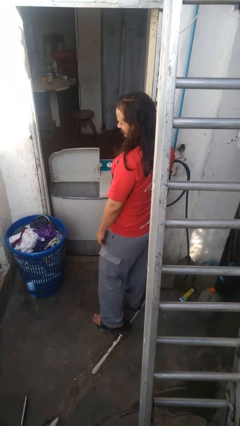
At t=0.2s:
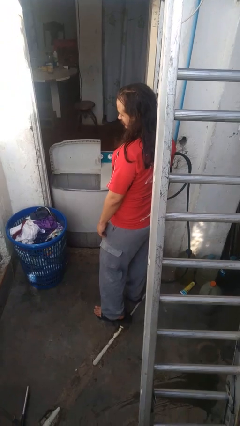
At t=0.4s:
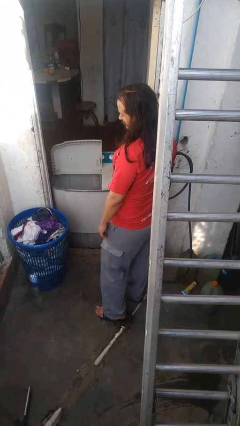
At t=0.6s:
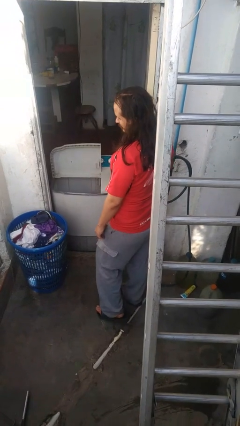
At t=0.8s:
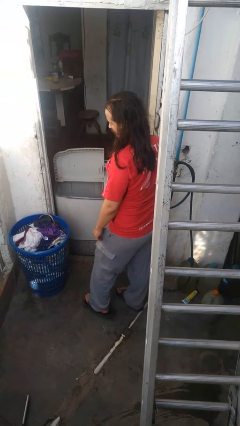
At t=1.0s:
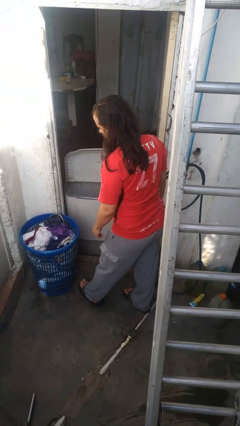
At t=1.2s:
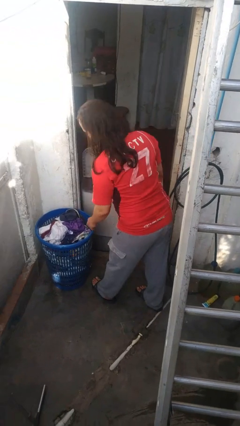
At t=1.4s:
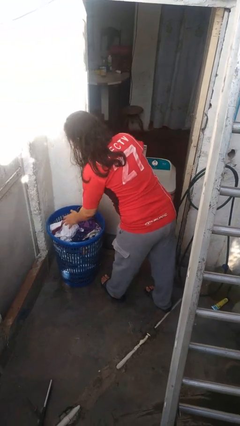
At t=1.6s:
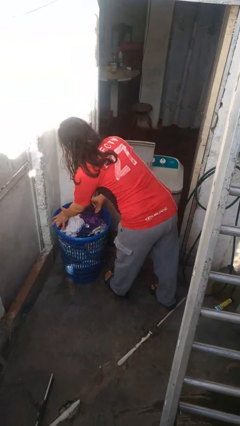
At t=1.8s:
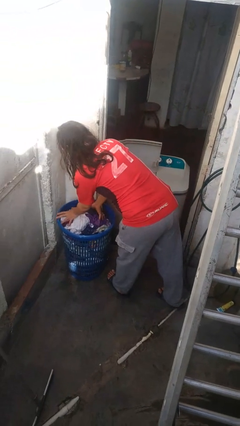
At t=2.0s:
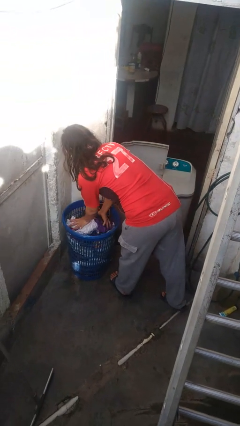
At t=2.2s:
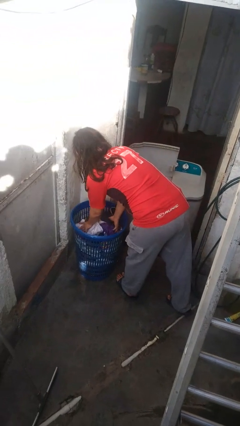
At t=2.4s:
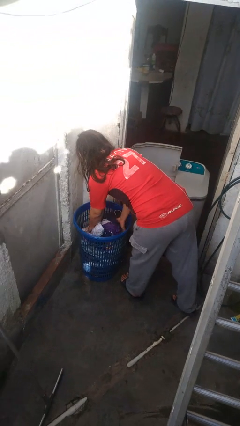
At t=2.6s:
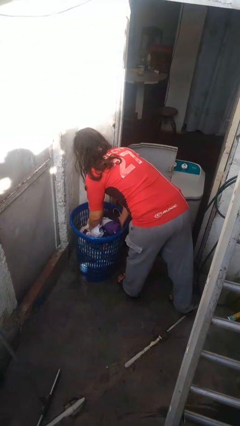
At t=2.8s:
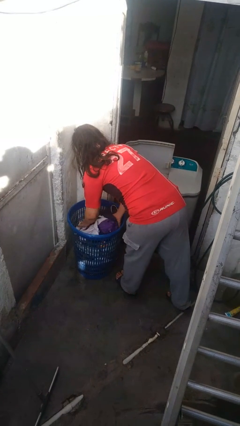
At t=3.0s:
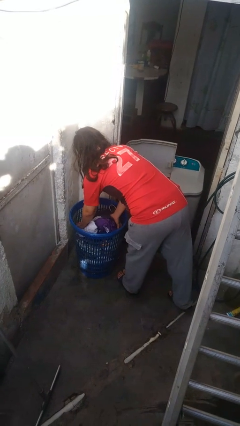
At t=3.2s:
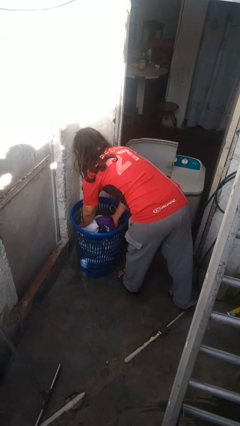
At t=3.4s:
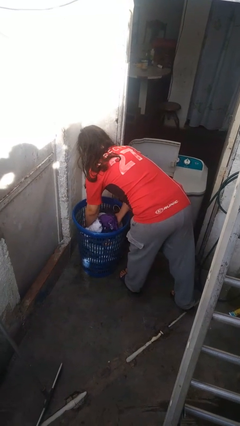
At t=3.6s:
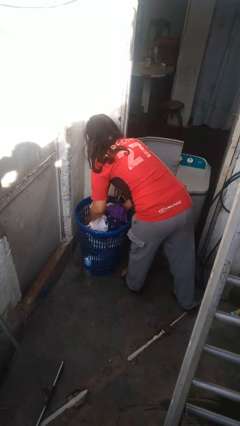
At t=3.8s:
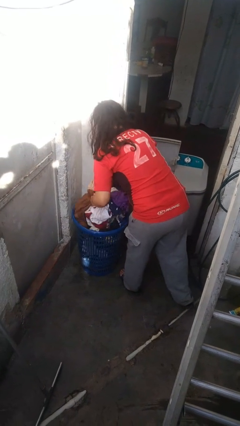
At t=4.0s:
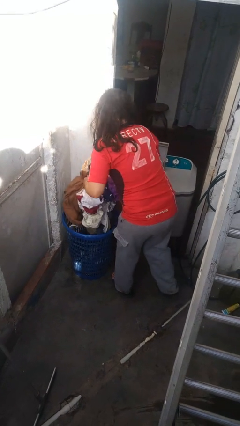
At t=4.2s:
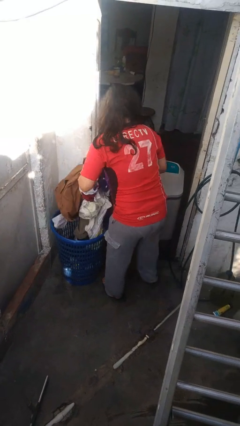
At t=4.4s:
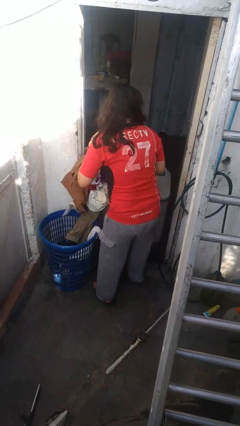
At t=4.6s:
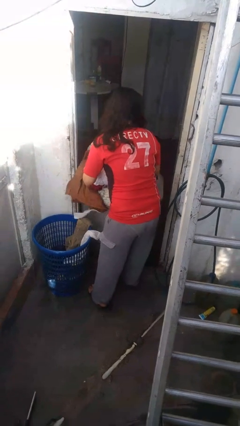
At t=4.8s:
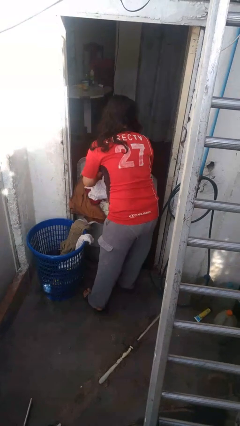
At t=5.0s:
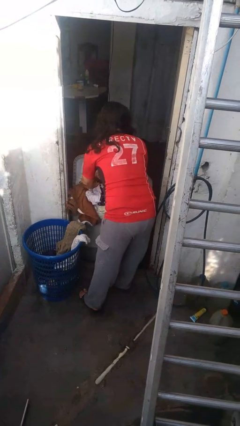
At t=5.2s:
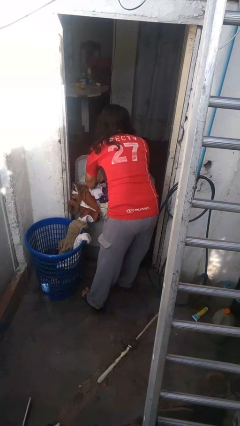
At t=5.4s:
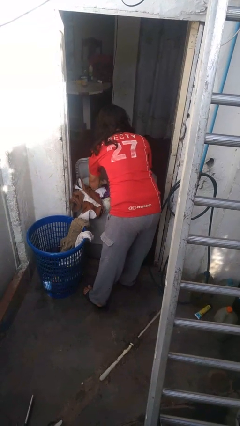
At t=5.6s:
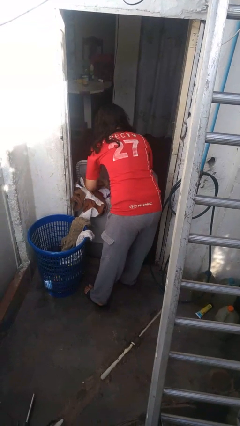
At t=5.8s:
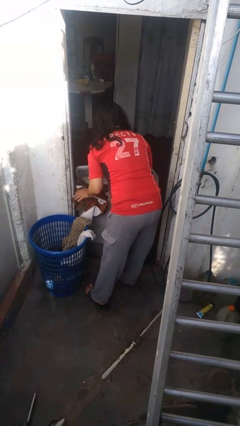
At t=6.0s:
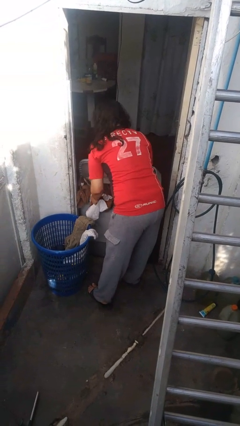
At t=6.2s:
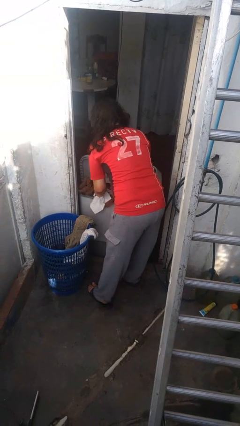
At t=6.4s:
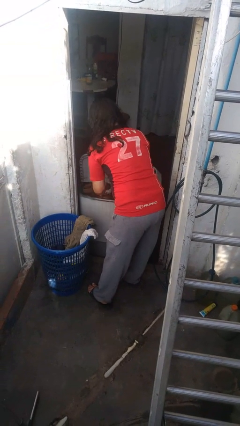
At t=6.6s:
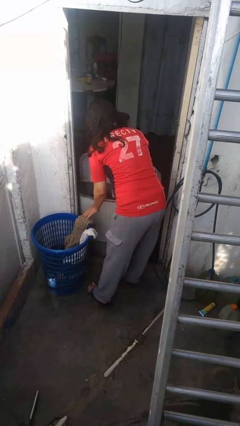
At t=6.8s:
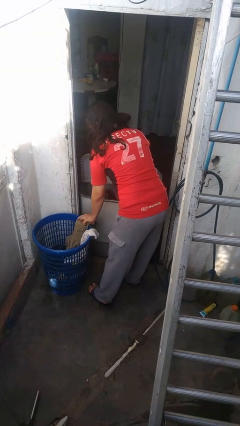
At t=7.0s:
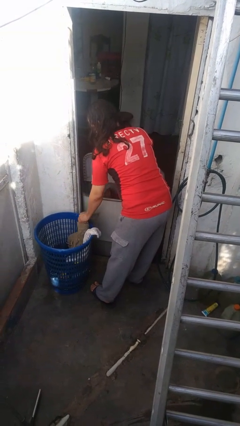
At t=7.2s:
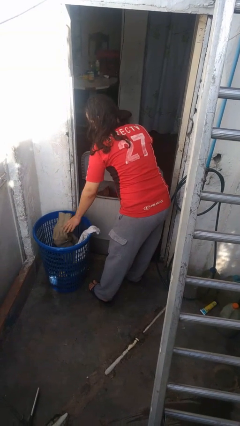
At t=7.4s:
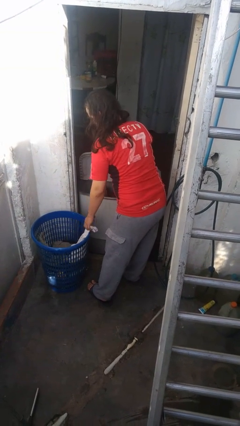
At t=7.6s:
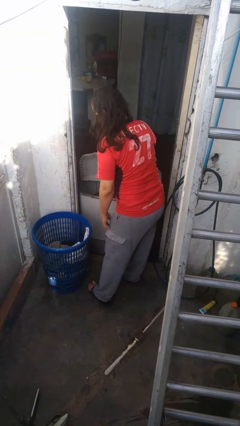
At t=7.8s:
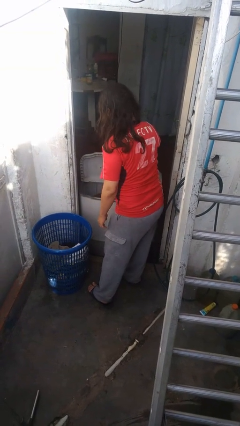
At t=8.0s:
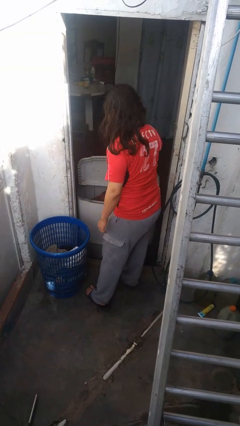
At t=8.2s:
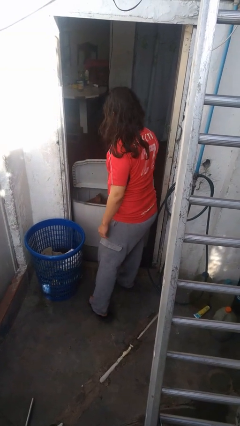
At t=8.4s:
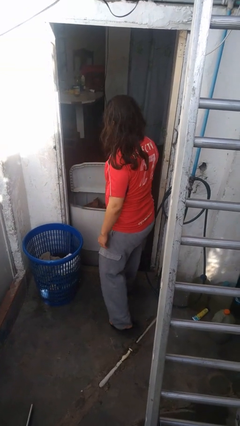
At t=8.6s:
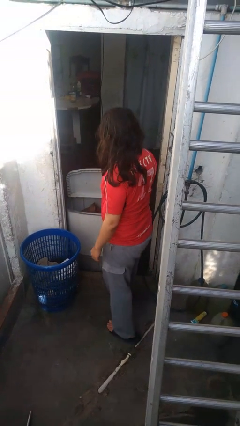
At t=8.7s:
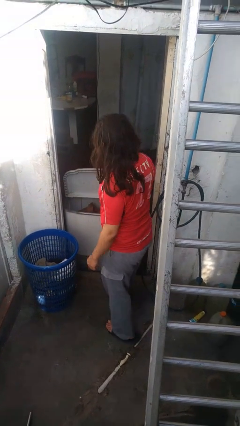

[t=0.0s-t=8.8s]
person loads clotheswasher

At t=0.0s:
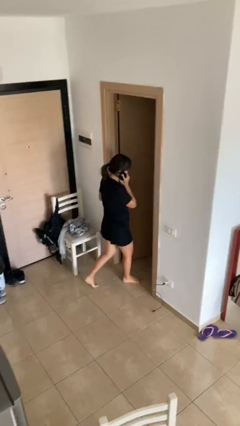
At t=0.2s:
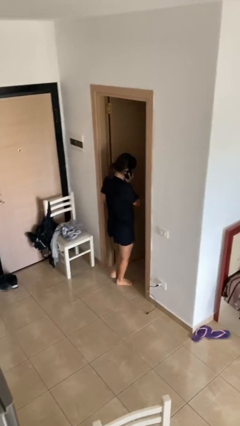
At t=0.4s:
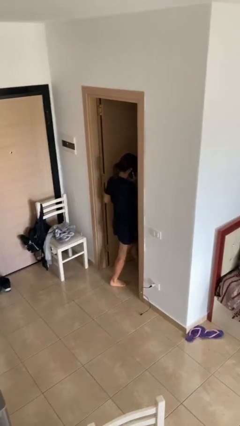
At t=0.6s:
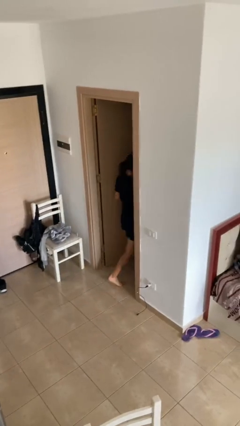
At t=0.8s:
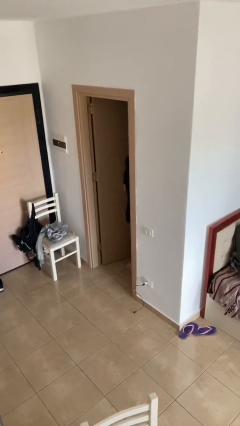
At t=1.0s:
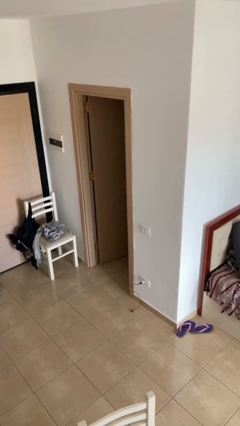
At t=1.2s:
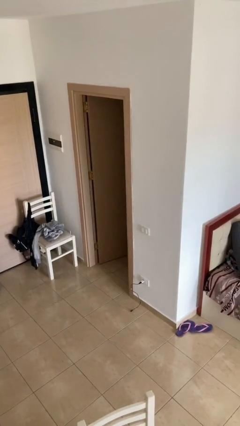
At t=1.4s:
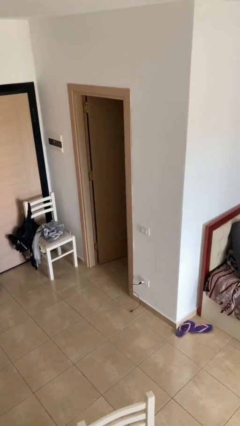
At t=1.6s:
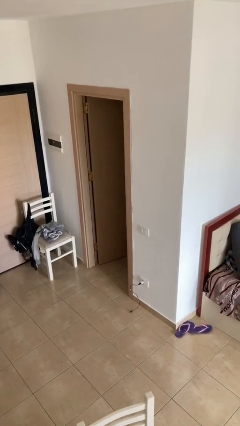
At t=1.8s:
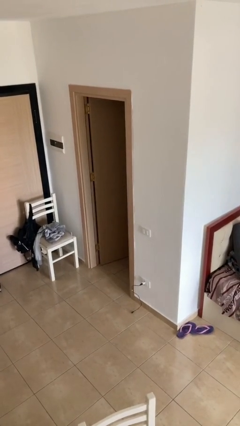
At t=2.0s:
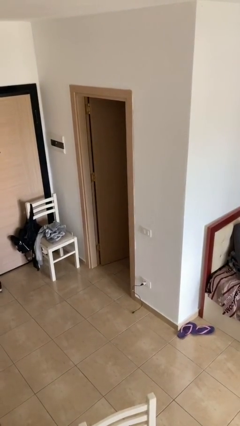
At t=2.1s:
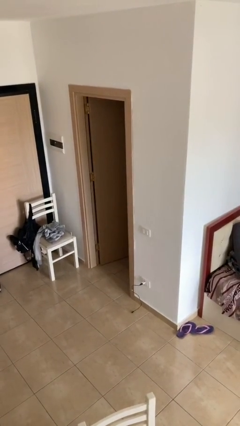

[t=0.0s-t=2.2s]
person exits scene through structure

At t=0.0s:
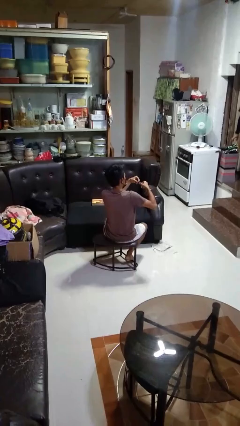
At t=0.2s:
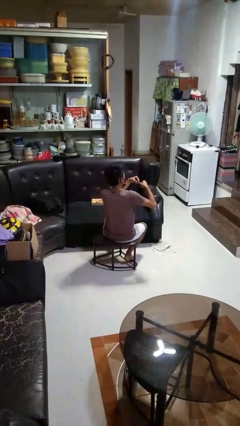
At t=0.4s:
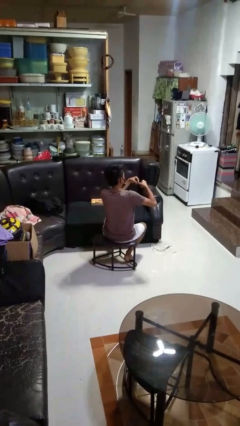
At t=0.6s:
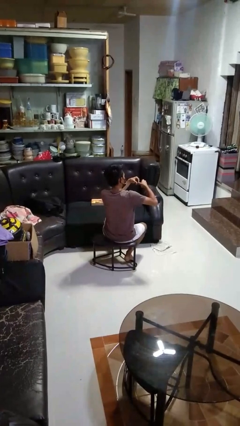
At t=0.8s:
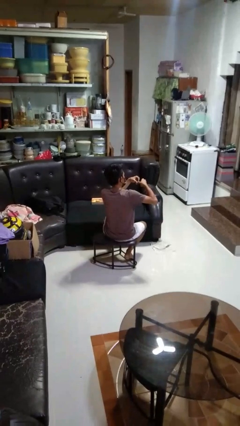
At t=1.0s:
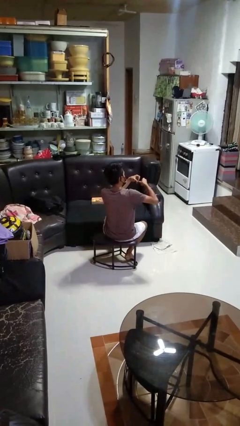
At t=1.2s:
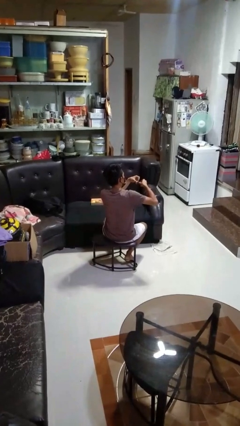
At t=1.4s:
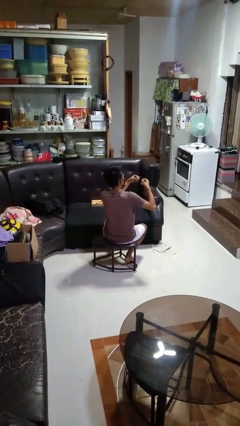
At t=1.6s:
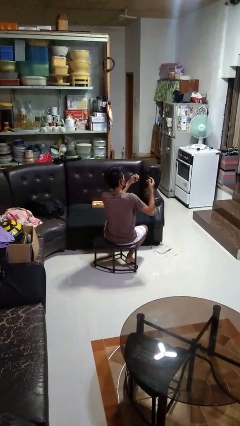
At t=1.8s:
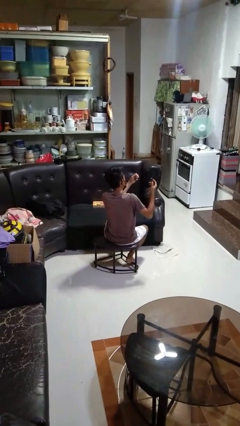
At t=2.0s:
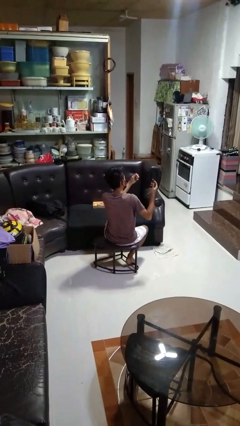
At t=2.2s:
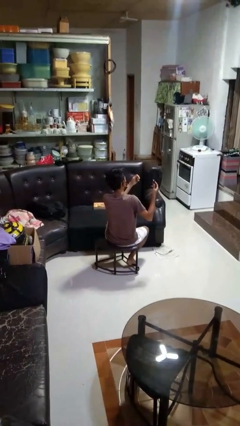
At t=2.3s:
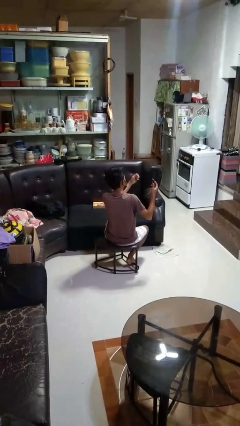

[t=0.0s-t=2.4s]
person clips fingernails

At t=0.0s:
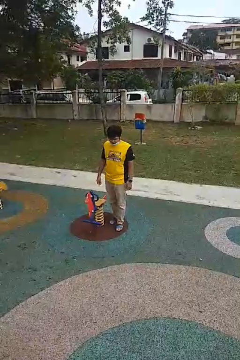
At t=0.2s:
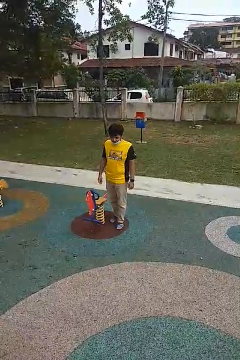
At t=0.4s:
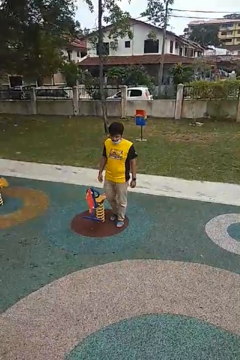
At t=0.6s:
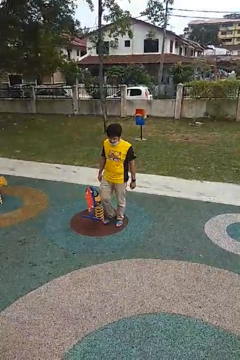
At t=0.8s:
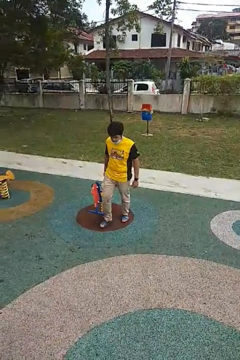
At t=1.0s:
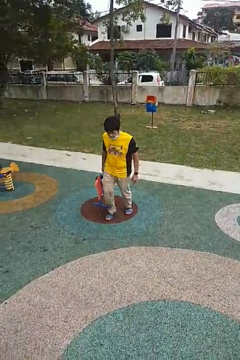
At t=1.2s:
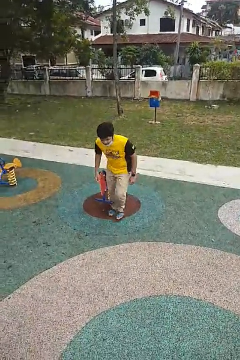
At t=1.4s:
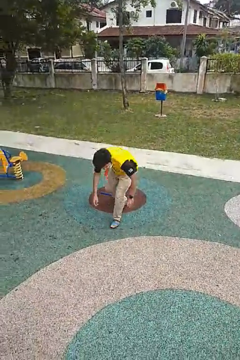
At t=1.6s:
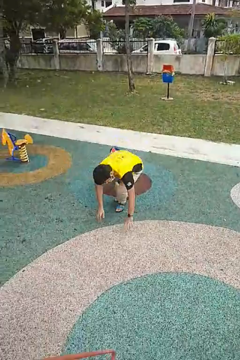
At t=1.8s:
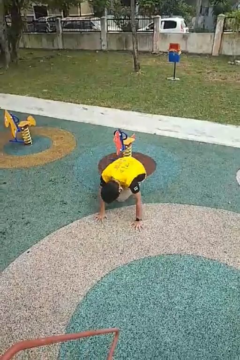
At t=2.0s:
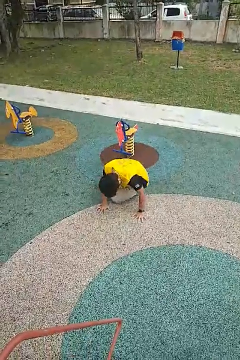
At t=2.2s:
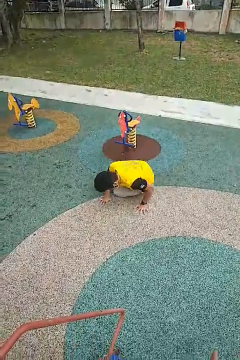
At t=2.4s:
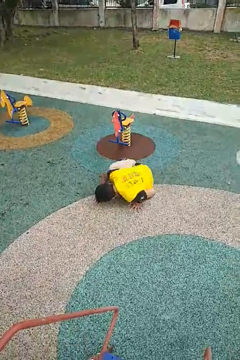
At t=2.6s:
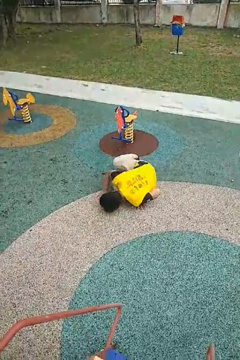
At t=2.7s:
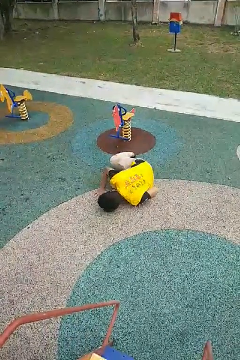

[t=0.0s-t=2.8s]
person trips on object on floor

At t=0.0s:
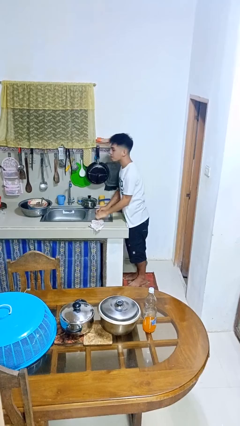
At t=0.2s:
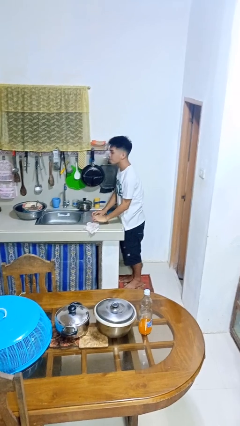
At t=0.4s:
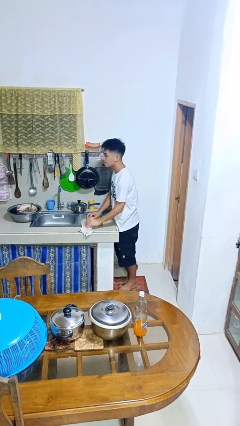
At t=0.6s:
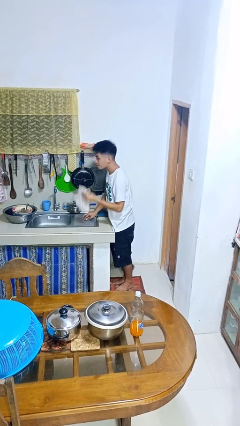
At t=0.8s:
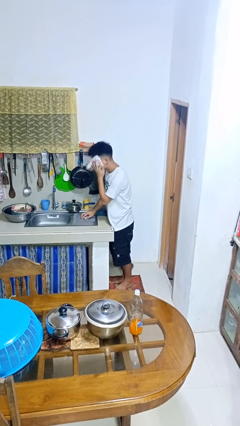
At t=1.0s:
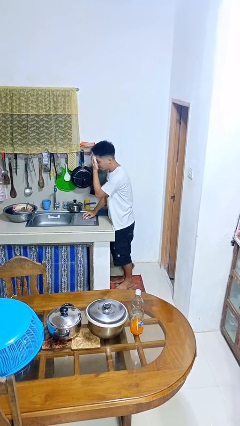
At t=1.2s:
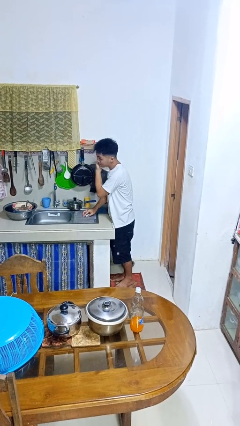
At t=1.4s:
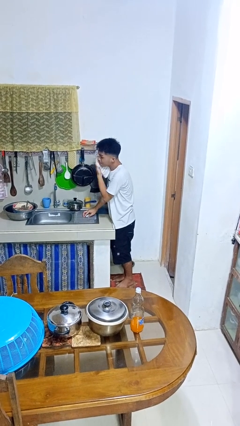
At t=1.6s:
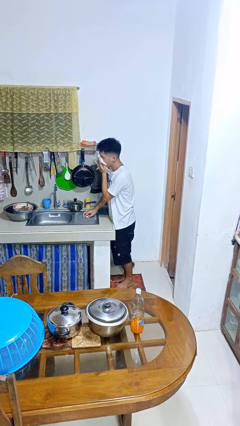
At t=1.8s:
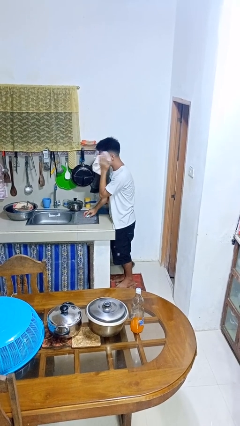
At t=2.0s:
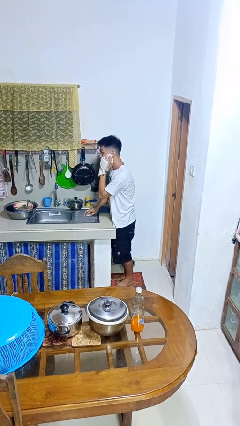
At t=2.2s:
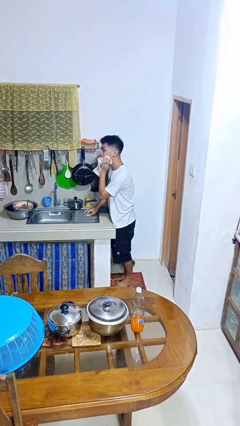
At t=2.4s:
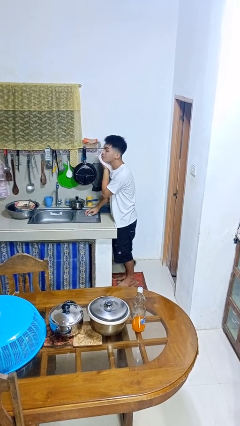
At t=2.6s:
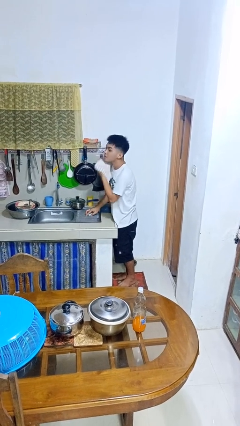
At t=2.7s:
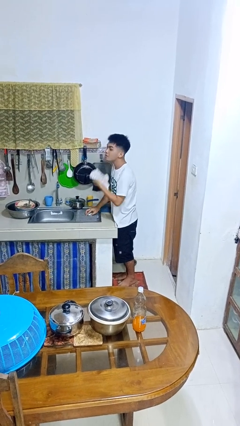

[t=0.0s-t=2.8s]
person dries face with towel
